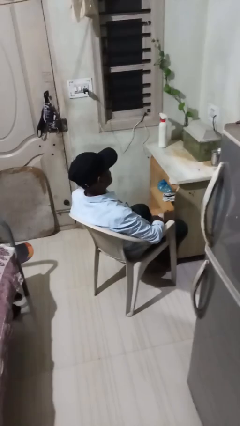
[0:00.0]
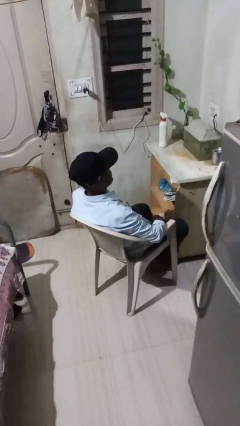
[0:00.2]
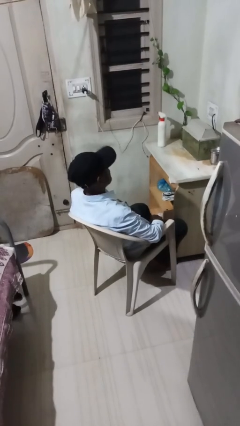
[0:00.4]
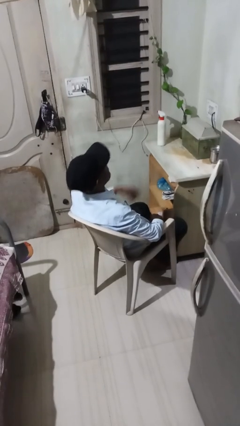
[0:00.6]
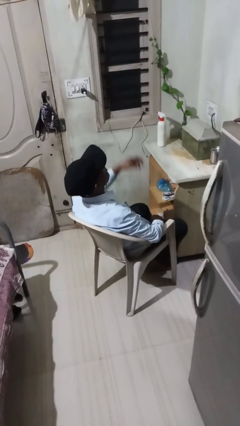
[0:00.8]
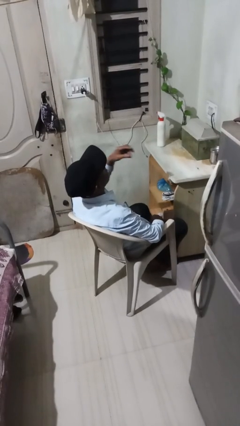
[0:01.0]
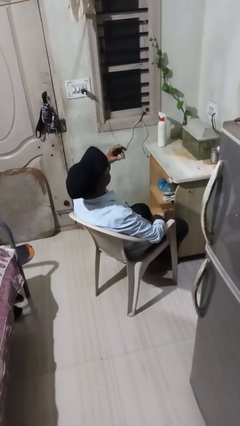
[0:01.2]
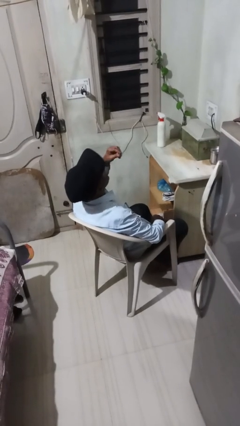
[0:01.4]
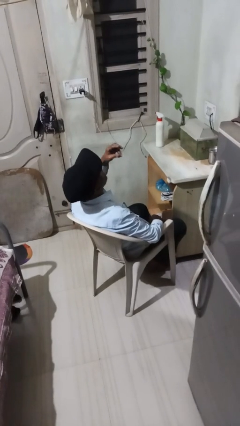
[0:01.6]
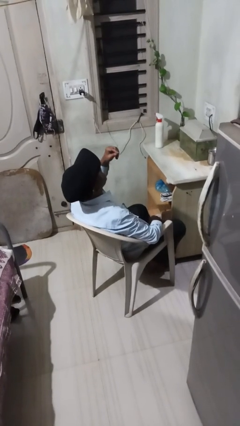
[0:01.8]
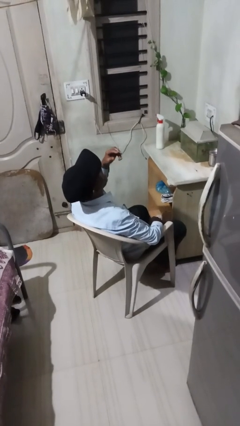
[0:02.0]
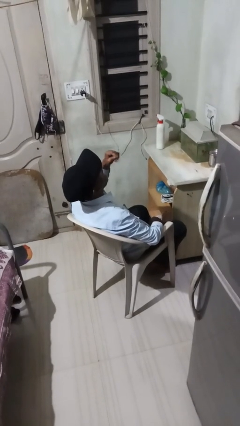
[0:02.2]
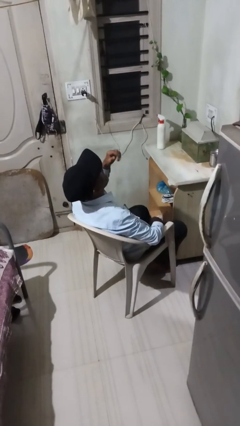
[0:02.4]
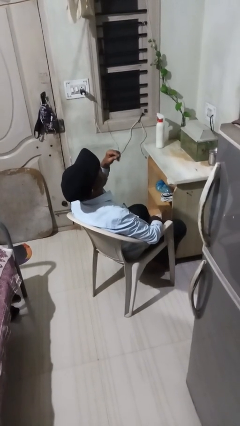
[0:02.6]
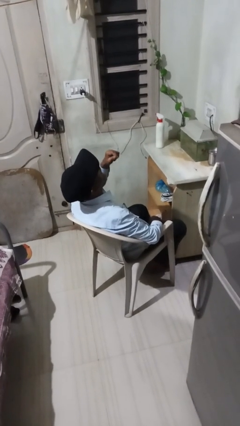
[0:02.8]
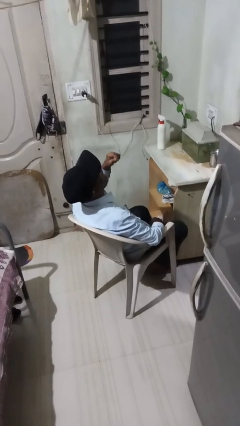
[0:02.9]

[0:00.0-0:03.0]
person yawns

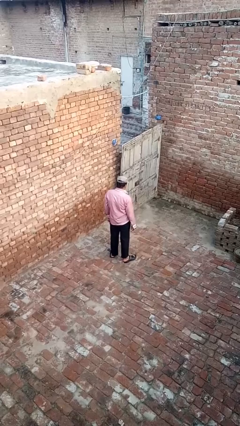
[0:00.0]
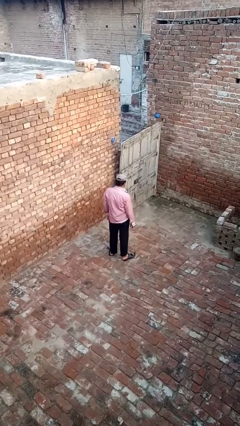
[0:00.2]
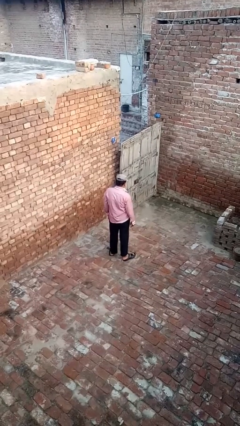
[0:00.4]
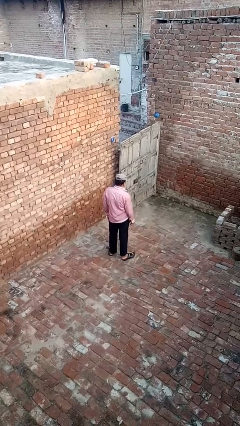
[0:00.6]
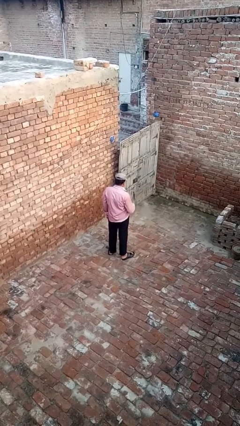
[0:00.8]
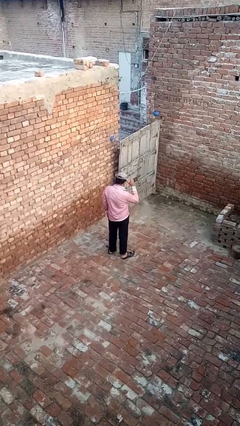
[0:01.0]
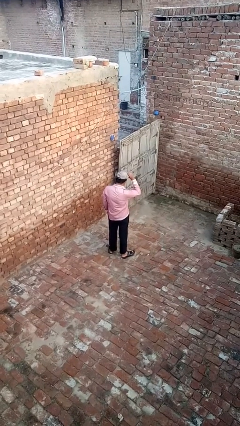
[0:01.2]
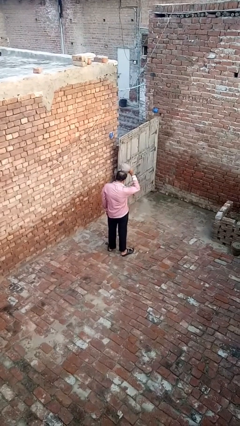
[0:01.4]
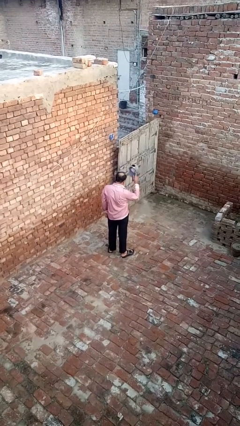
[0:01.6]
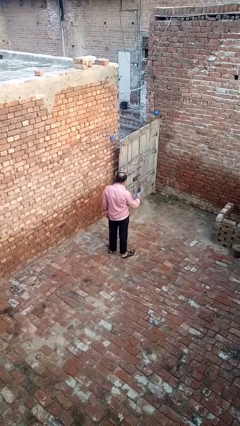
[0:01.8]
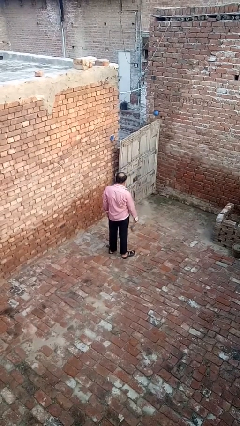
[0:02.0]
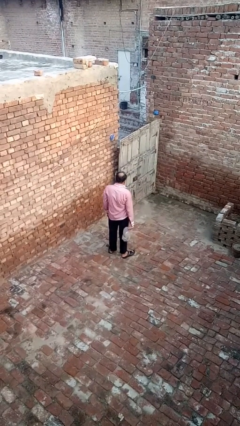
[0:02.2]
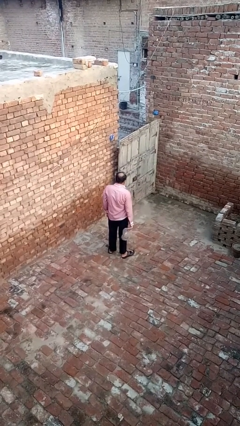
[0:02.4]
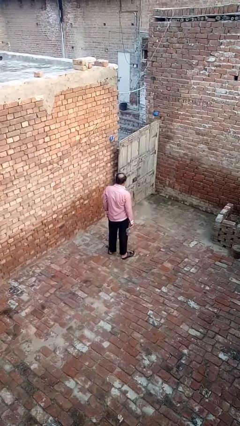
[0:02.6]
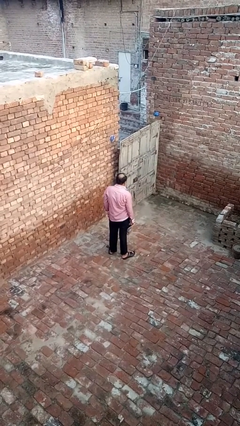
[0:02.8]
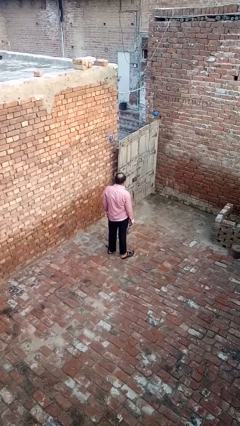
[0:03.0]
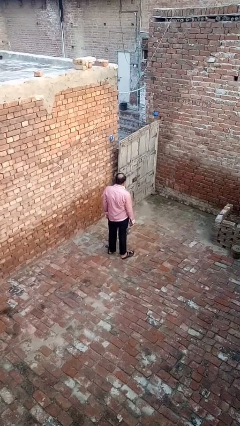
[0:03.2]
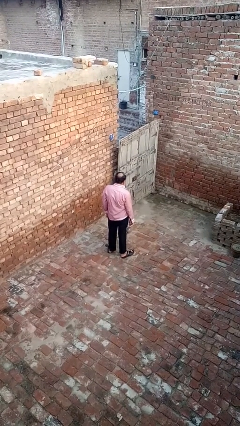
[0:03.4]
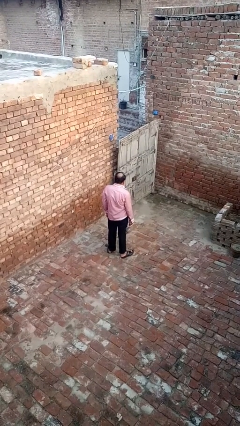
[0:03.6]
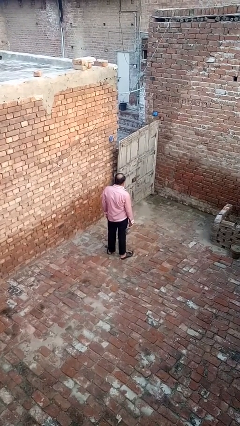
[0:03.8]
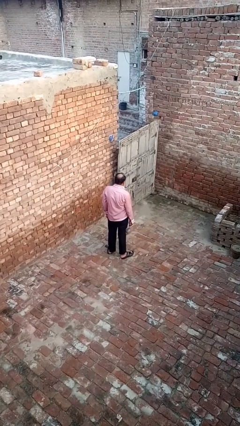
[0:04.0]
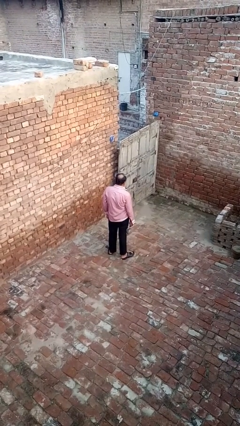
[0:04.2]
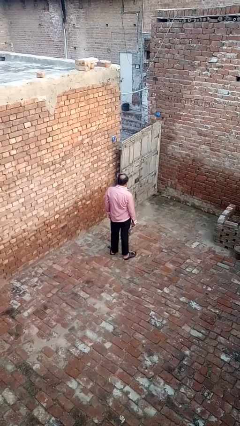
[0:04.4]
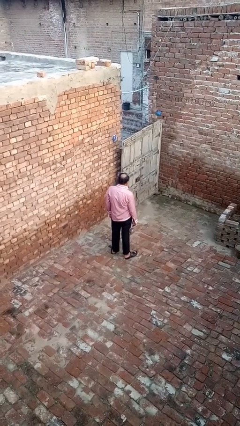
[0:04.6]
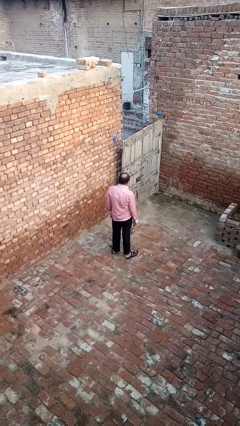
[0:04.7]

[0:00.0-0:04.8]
person takes off hat

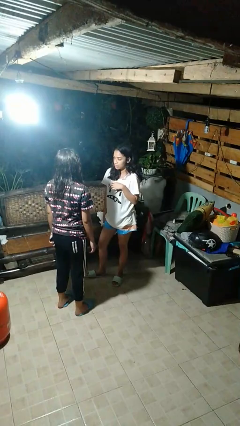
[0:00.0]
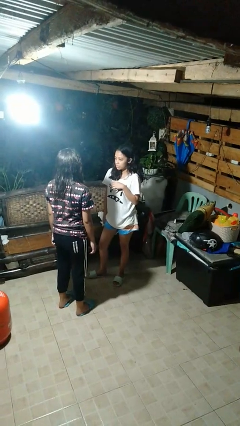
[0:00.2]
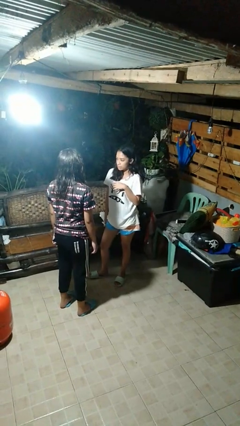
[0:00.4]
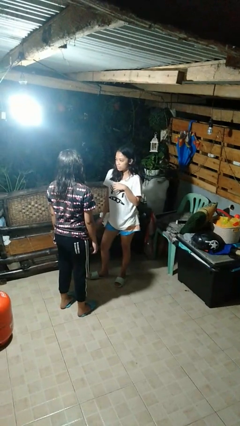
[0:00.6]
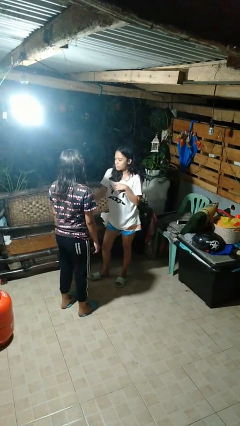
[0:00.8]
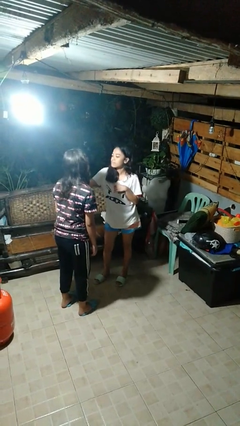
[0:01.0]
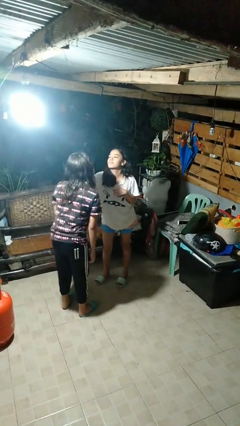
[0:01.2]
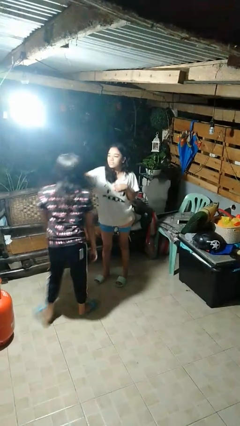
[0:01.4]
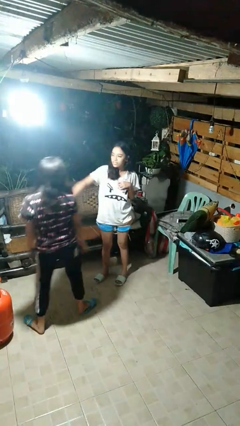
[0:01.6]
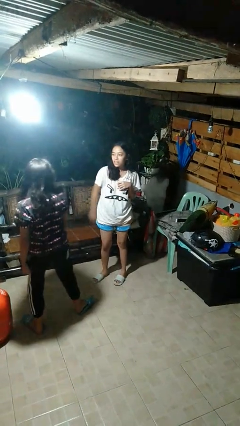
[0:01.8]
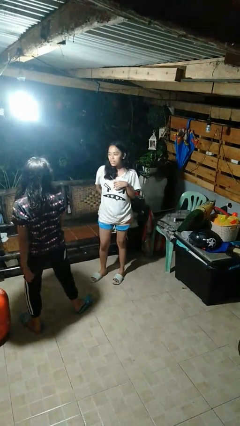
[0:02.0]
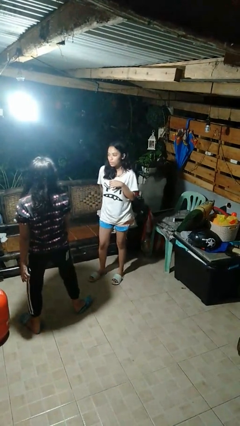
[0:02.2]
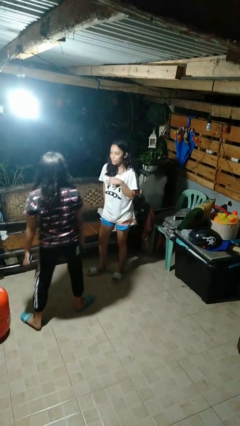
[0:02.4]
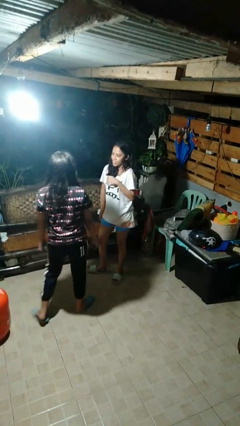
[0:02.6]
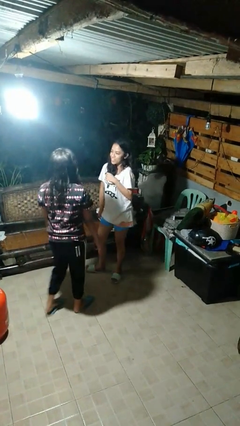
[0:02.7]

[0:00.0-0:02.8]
person shoves person

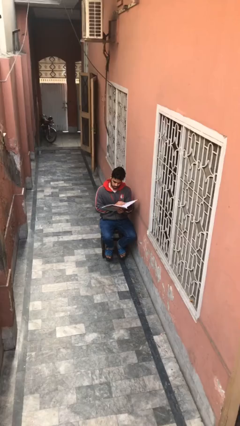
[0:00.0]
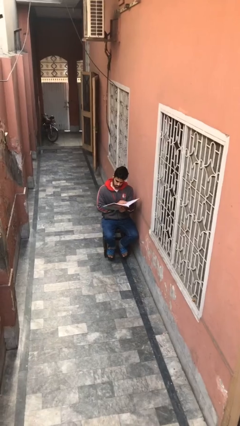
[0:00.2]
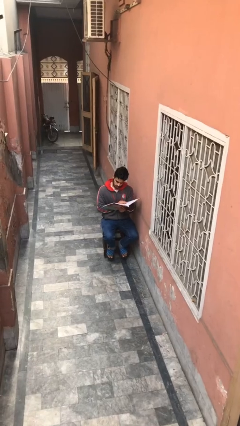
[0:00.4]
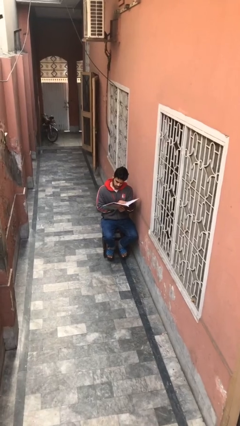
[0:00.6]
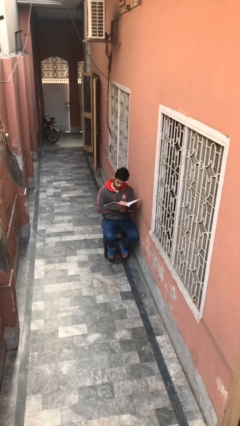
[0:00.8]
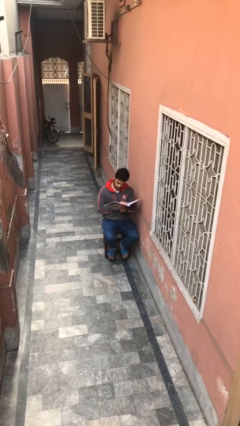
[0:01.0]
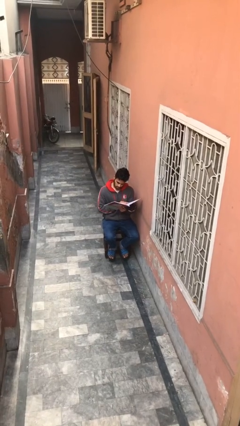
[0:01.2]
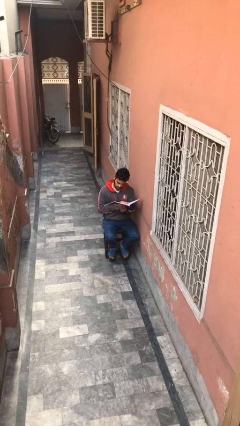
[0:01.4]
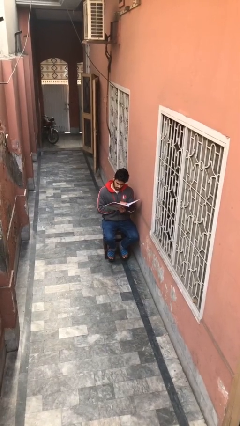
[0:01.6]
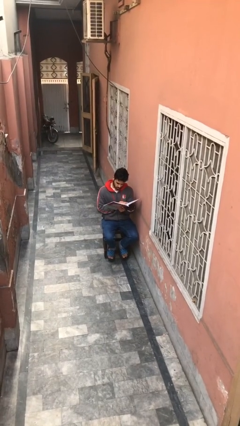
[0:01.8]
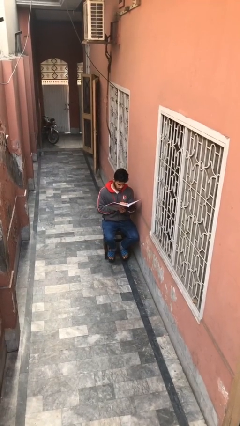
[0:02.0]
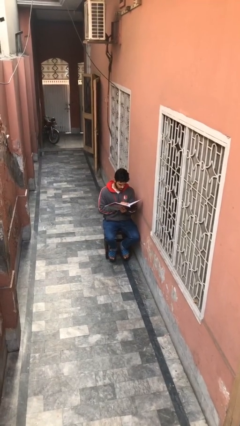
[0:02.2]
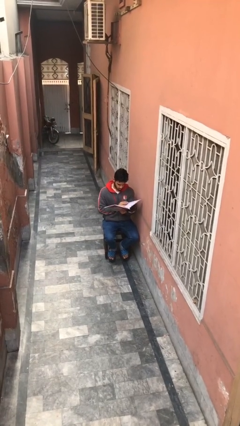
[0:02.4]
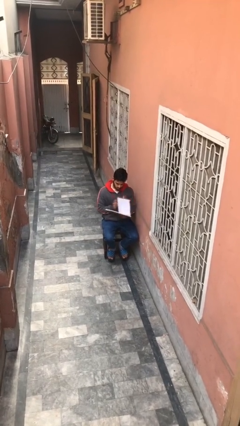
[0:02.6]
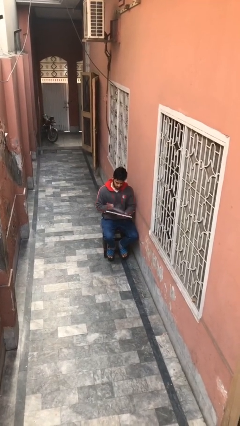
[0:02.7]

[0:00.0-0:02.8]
person reads document

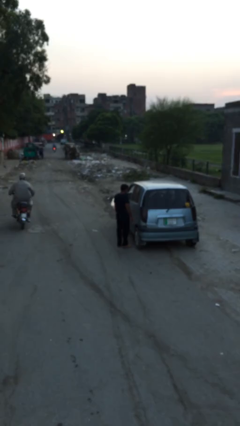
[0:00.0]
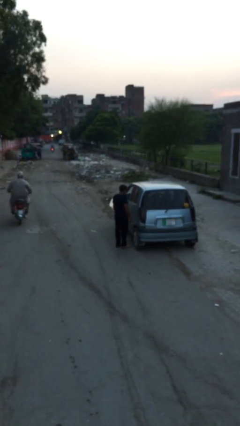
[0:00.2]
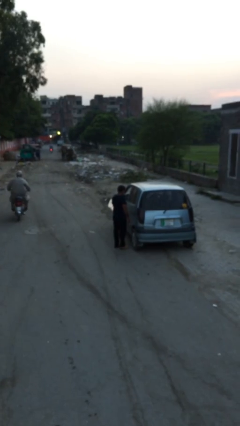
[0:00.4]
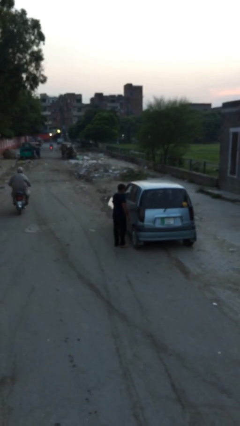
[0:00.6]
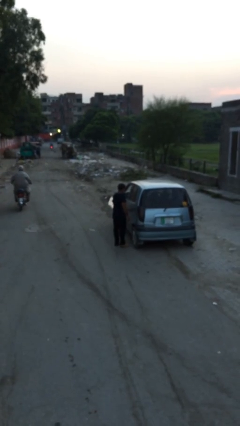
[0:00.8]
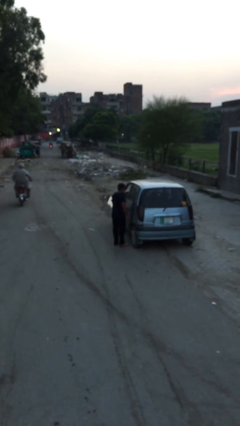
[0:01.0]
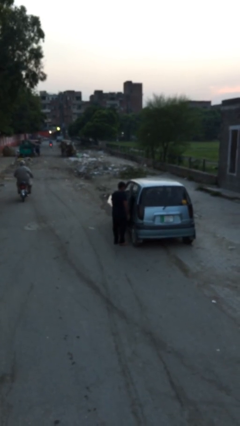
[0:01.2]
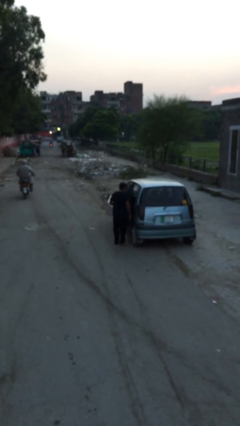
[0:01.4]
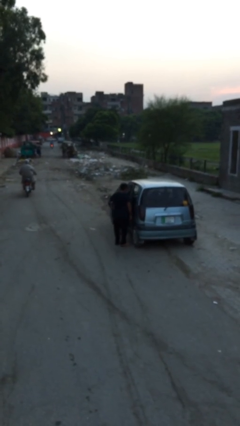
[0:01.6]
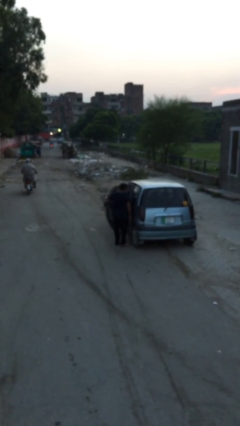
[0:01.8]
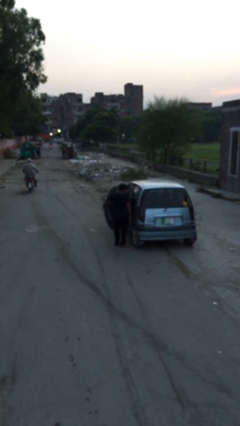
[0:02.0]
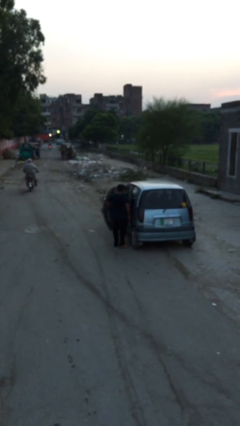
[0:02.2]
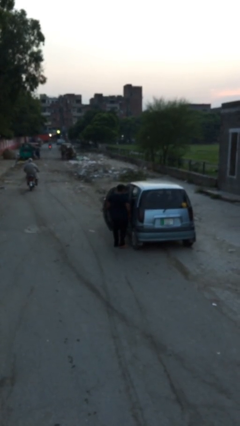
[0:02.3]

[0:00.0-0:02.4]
person opens car door

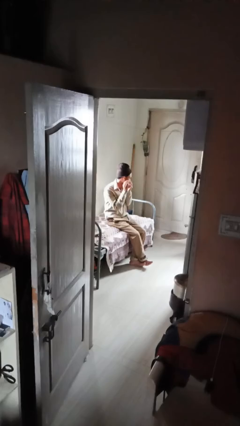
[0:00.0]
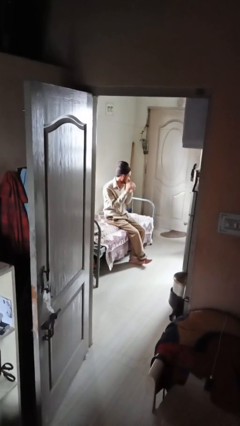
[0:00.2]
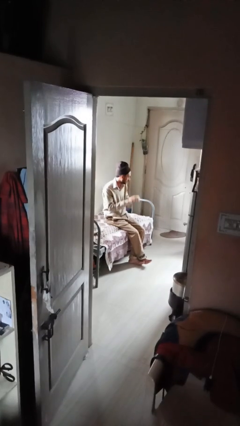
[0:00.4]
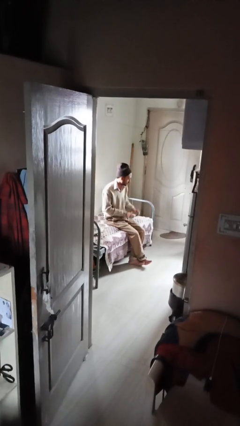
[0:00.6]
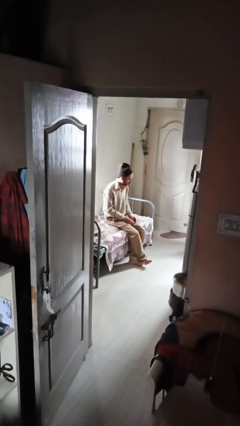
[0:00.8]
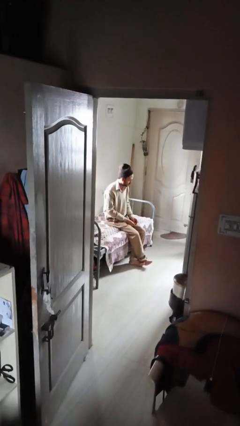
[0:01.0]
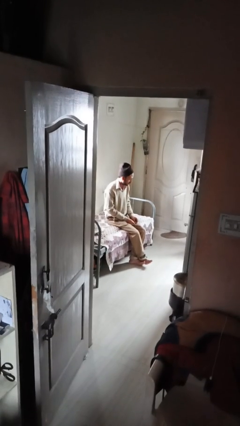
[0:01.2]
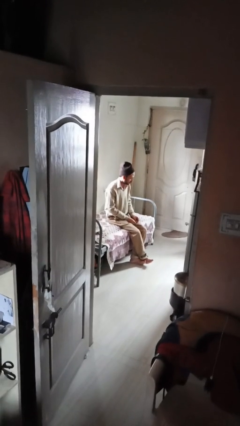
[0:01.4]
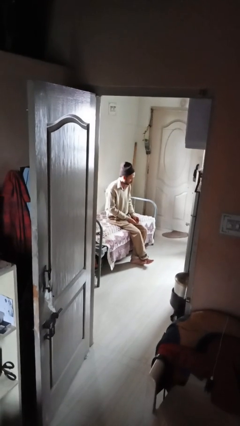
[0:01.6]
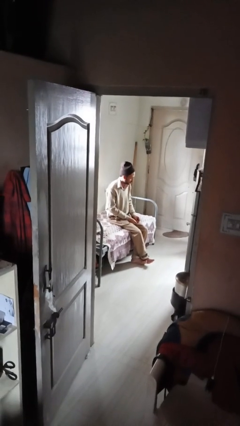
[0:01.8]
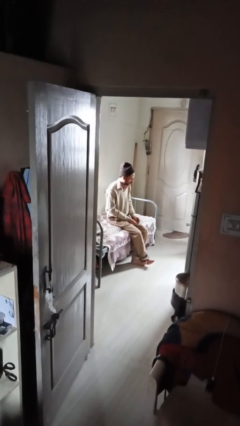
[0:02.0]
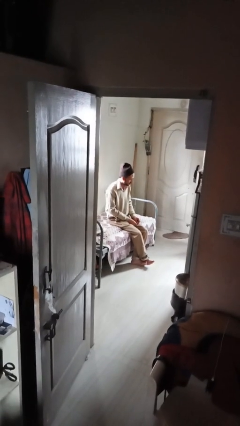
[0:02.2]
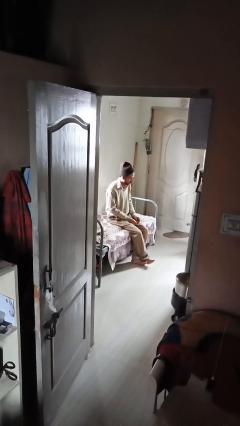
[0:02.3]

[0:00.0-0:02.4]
person takes off earrings
